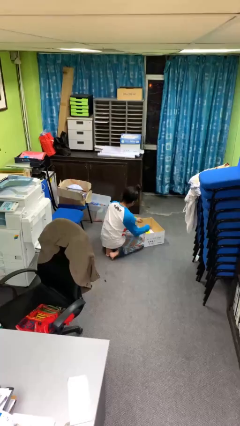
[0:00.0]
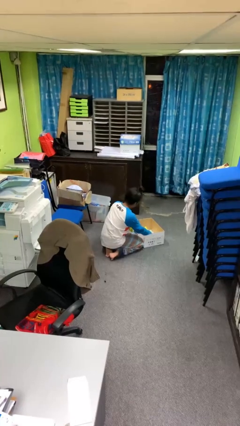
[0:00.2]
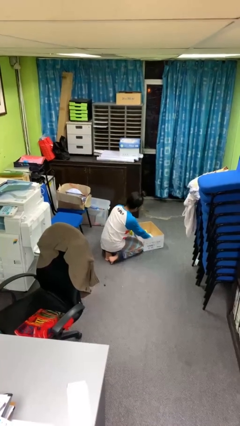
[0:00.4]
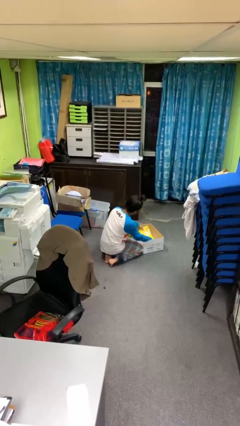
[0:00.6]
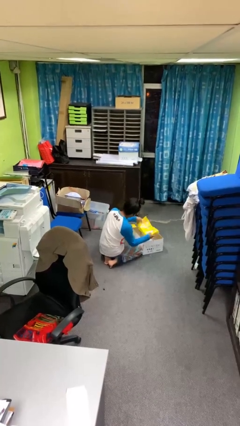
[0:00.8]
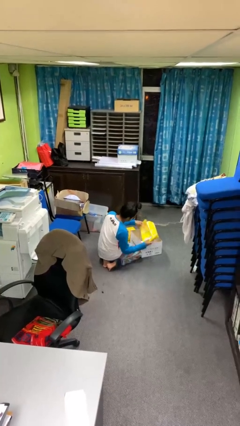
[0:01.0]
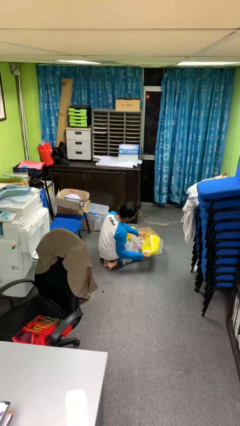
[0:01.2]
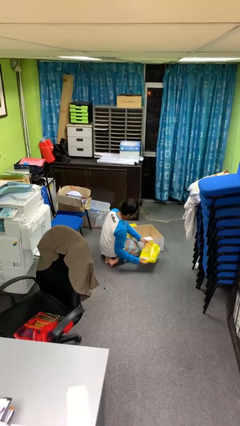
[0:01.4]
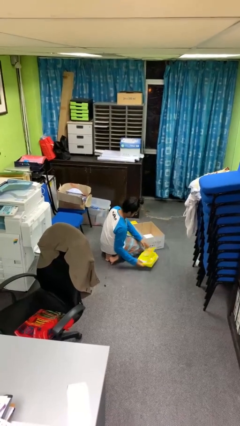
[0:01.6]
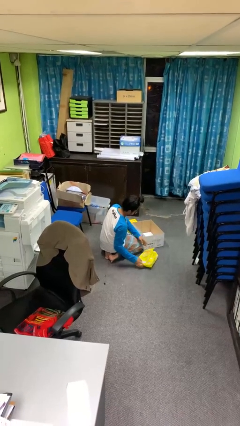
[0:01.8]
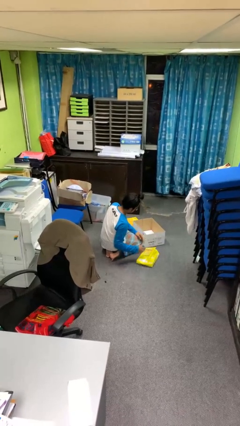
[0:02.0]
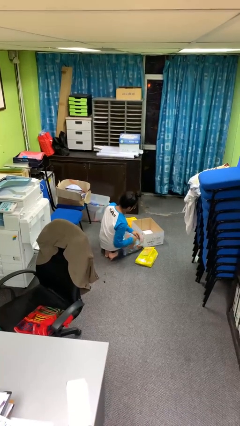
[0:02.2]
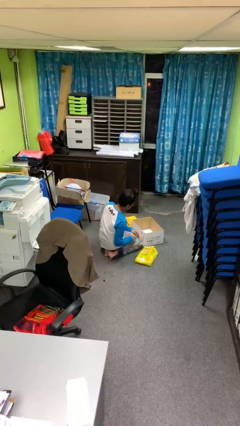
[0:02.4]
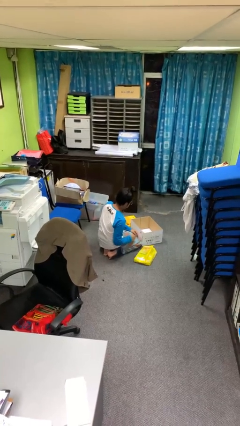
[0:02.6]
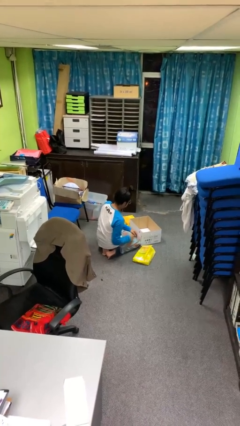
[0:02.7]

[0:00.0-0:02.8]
person takes object from box

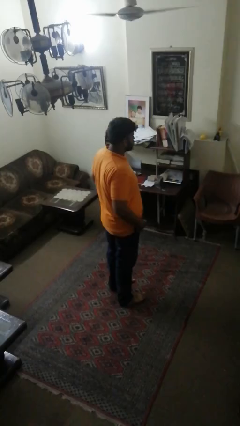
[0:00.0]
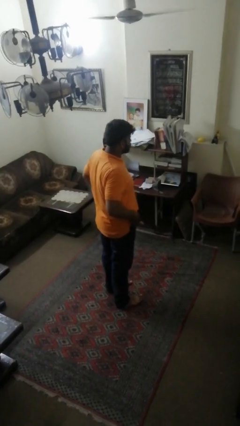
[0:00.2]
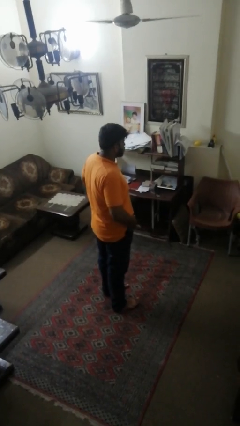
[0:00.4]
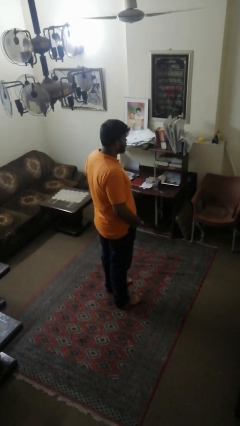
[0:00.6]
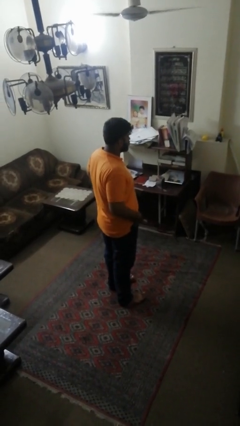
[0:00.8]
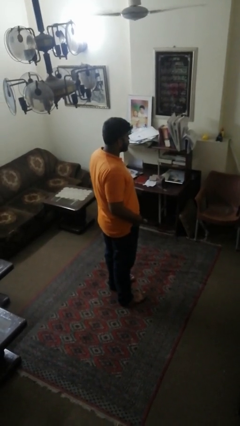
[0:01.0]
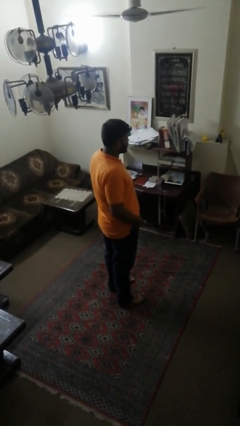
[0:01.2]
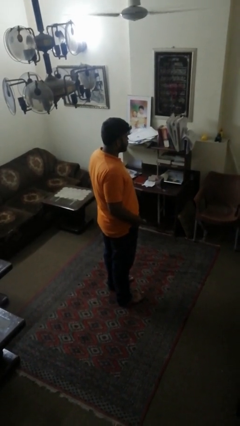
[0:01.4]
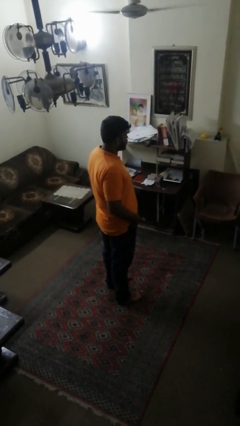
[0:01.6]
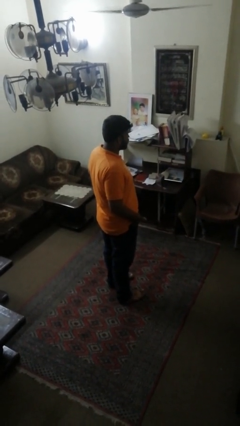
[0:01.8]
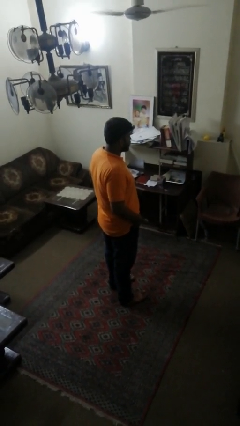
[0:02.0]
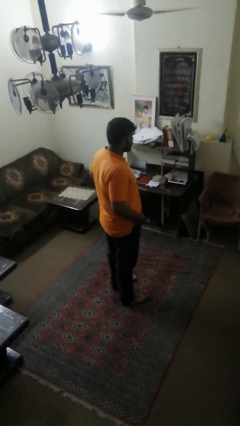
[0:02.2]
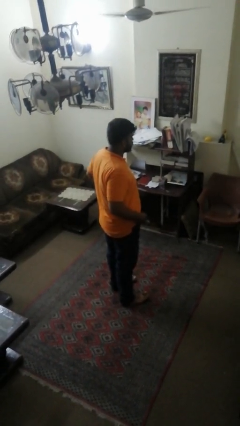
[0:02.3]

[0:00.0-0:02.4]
person puts hands in back pockets

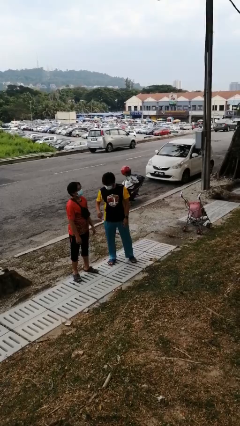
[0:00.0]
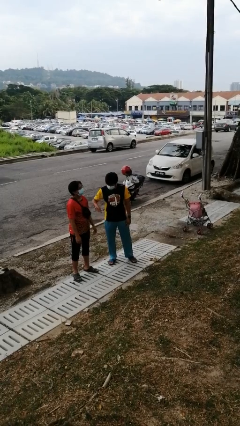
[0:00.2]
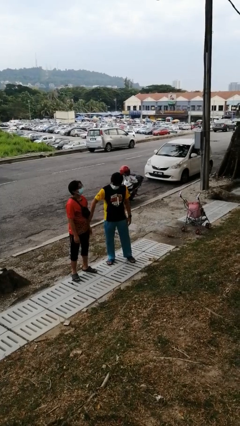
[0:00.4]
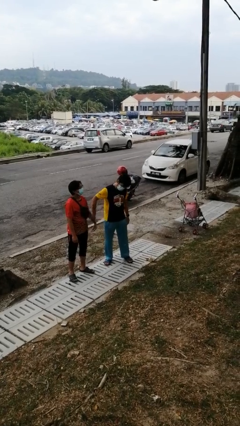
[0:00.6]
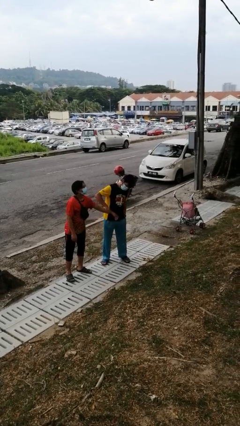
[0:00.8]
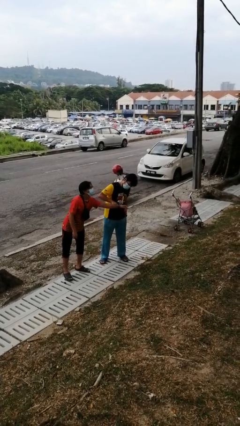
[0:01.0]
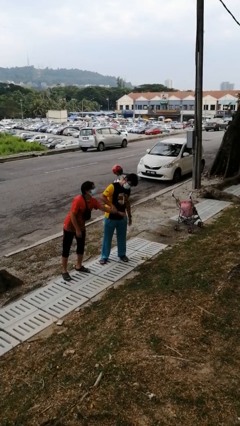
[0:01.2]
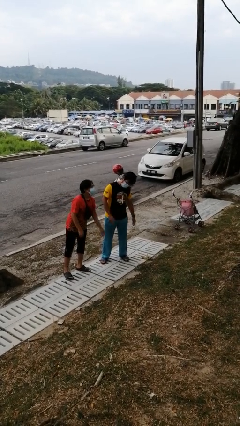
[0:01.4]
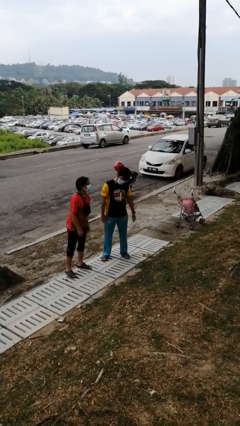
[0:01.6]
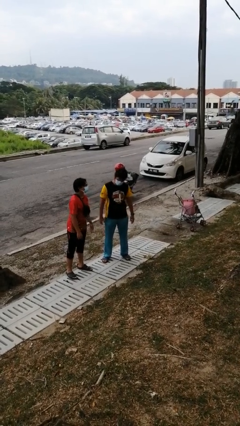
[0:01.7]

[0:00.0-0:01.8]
person grabs person by forearm

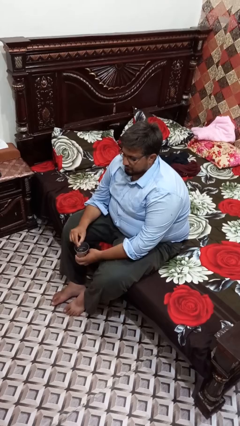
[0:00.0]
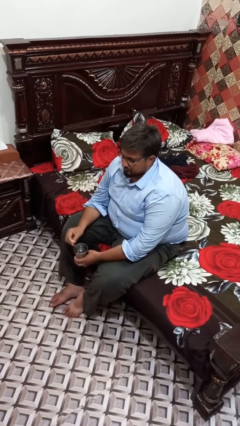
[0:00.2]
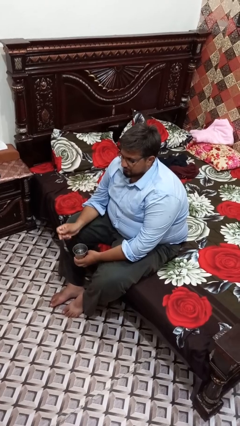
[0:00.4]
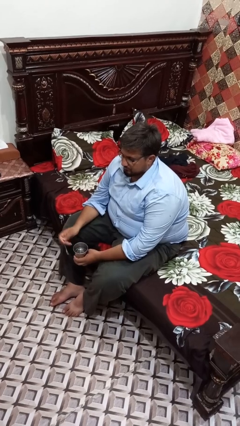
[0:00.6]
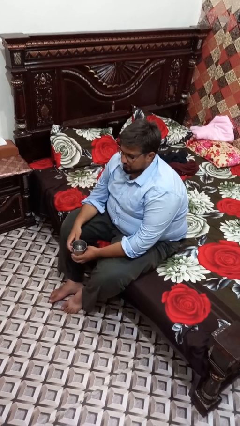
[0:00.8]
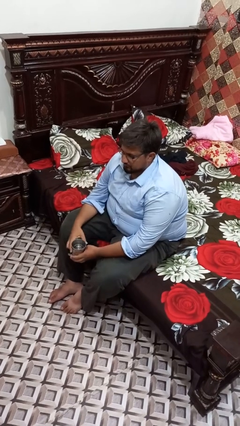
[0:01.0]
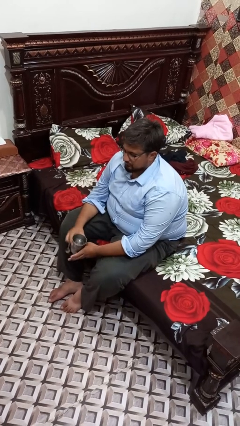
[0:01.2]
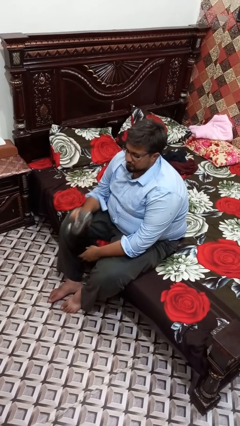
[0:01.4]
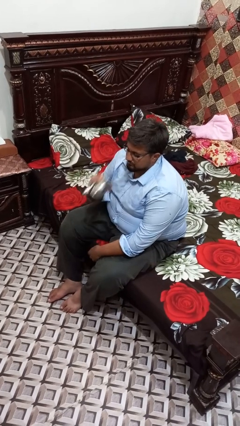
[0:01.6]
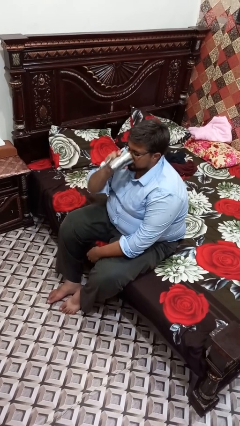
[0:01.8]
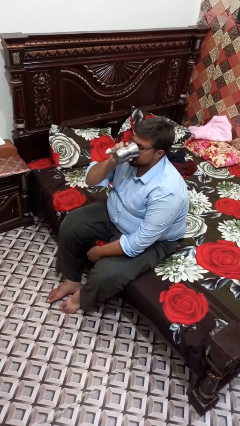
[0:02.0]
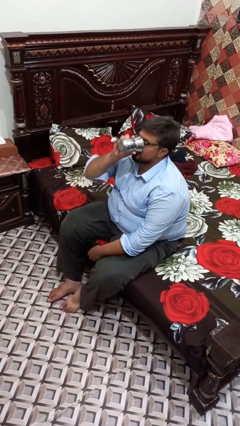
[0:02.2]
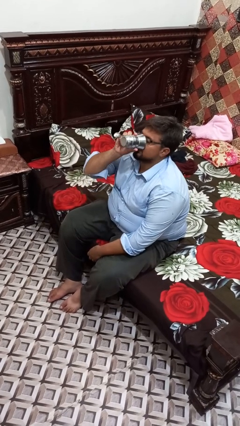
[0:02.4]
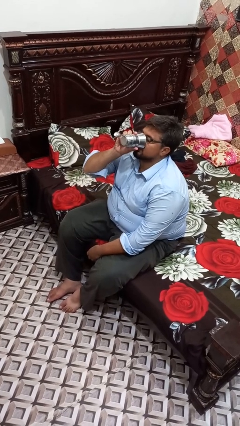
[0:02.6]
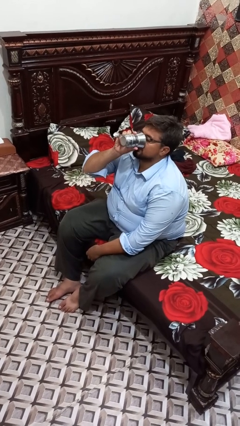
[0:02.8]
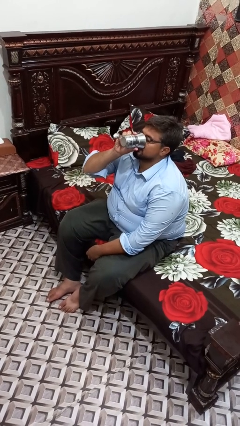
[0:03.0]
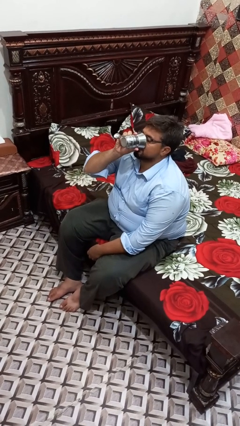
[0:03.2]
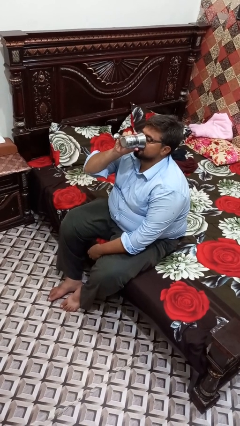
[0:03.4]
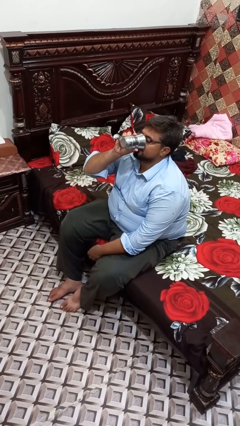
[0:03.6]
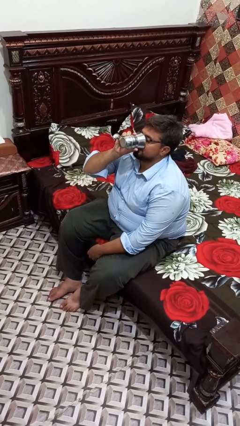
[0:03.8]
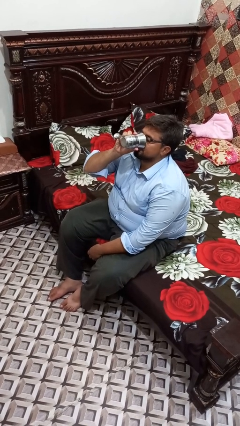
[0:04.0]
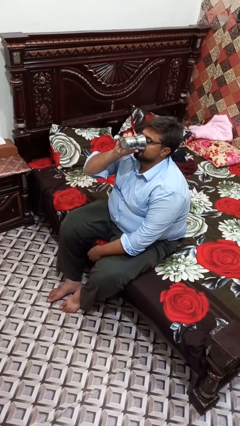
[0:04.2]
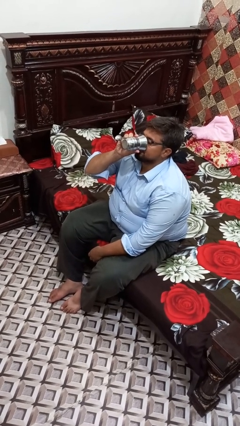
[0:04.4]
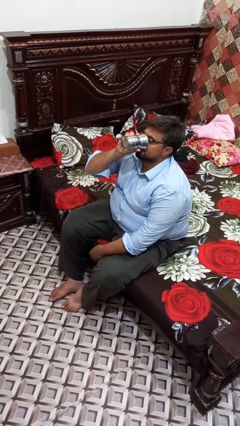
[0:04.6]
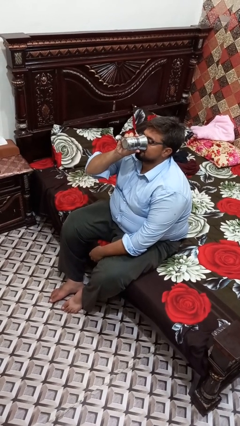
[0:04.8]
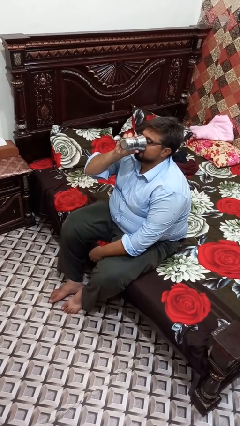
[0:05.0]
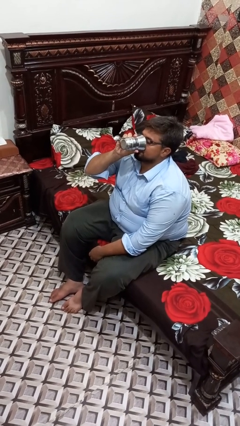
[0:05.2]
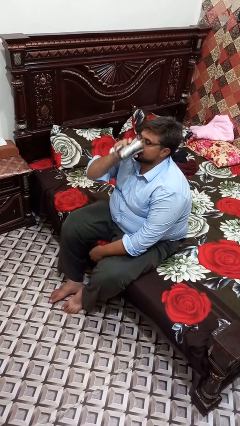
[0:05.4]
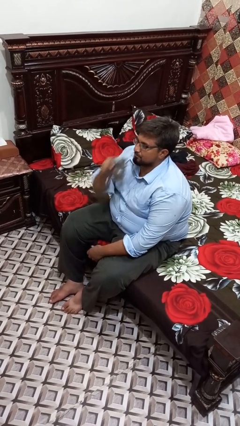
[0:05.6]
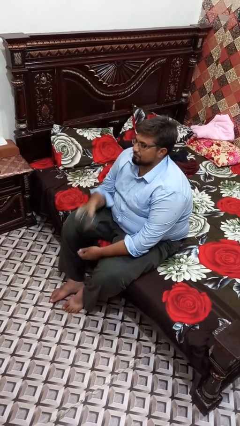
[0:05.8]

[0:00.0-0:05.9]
person drinks from mug

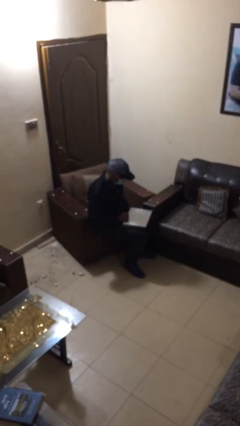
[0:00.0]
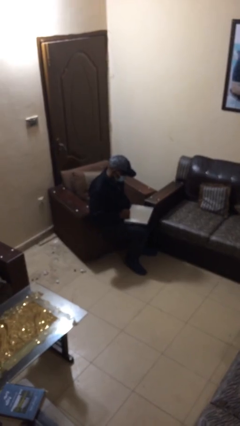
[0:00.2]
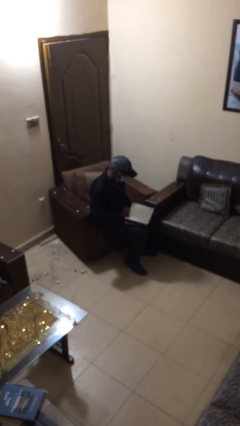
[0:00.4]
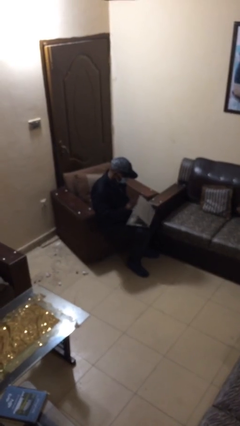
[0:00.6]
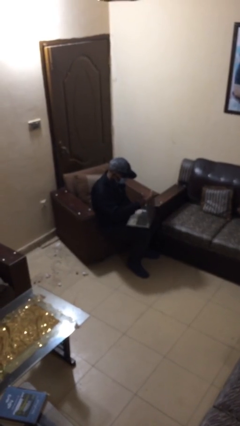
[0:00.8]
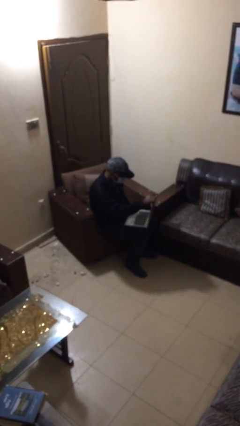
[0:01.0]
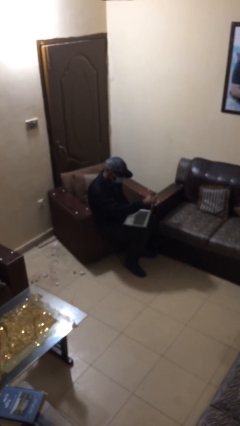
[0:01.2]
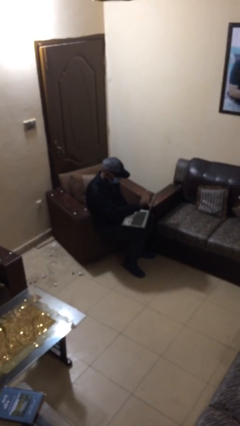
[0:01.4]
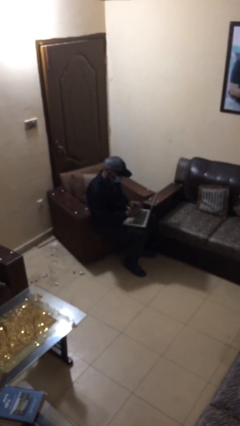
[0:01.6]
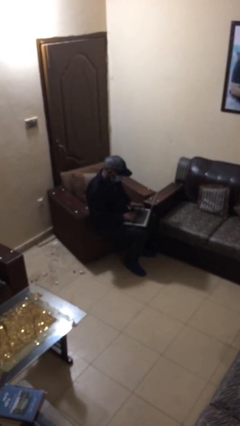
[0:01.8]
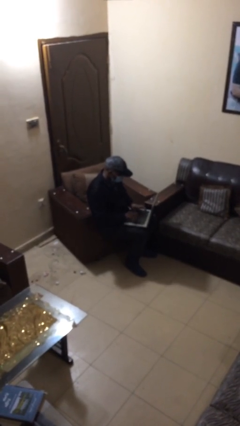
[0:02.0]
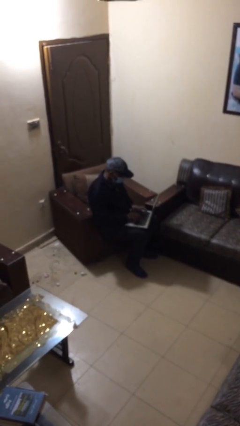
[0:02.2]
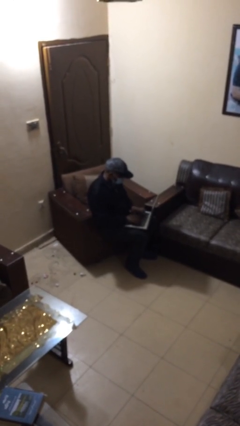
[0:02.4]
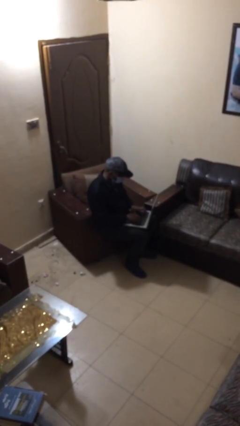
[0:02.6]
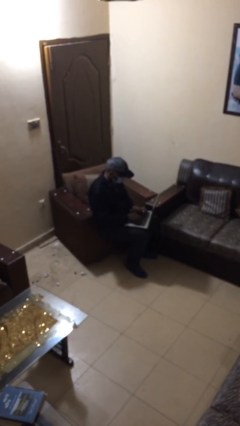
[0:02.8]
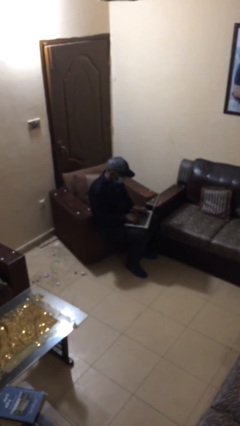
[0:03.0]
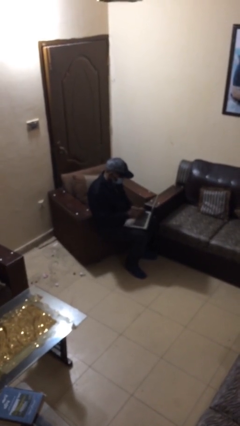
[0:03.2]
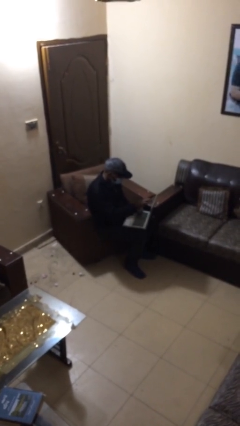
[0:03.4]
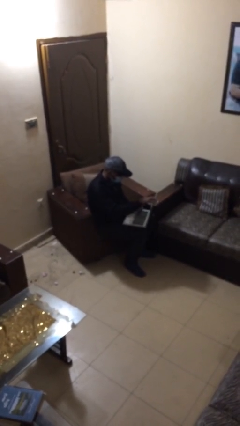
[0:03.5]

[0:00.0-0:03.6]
person interacts with laptop

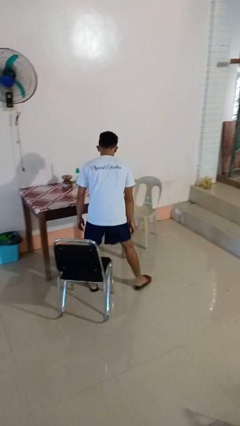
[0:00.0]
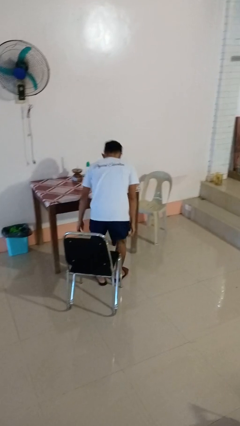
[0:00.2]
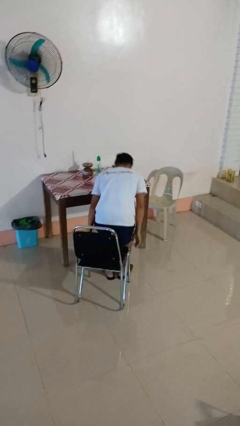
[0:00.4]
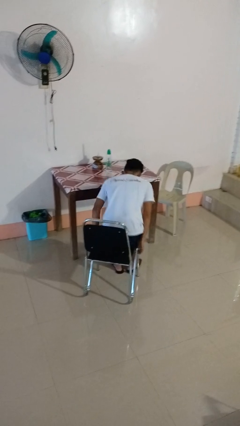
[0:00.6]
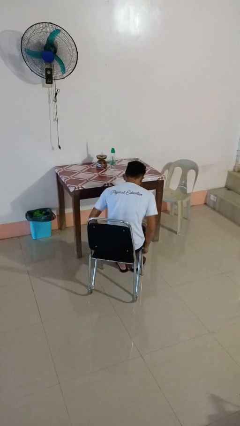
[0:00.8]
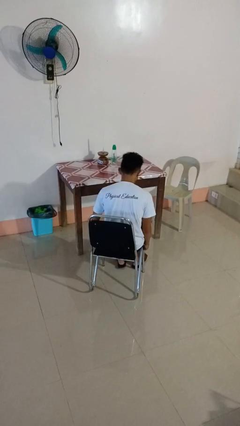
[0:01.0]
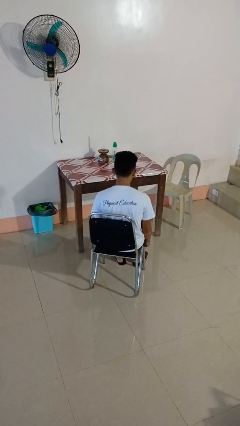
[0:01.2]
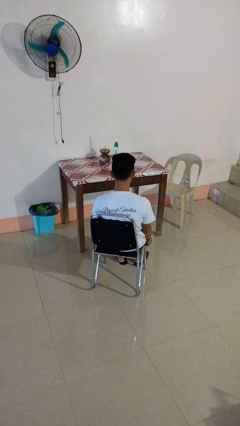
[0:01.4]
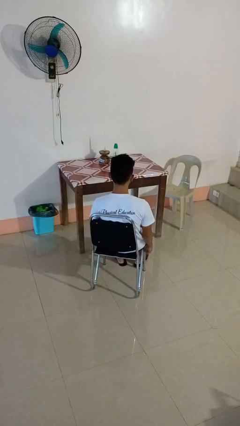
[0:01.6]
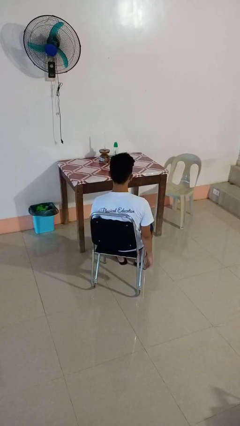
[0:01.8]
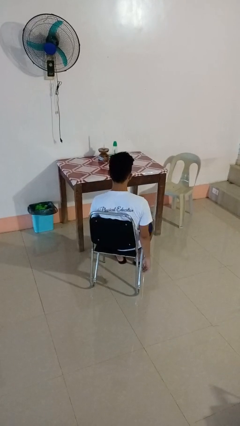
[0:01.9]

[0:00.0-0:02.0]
person sits down
